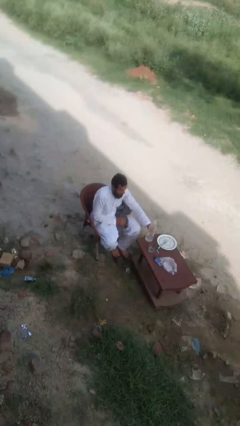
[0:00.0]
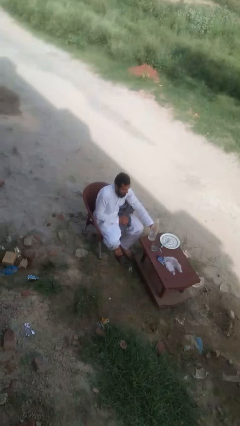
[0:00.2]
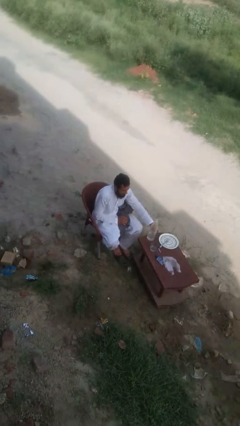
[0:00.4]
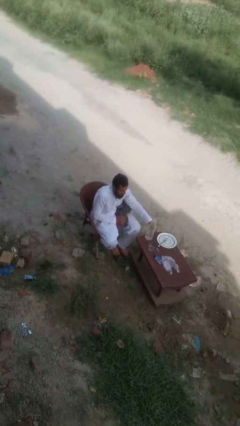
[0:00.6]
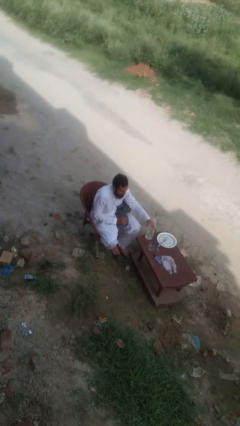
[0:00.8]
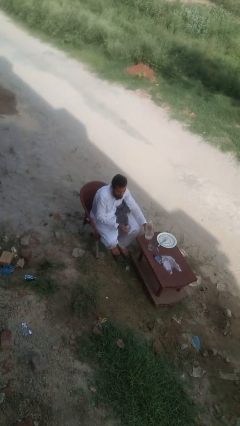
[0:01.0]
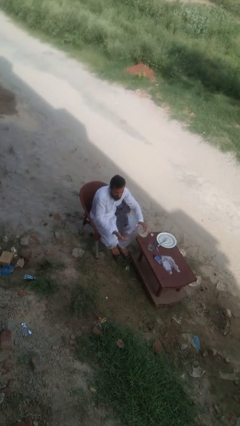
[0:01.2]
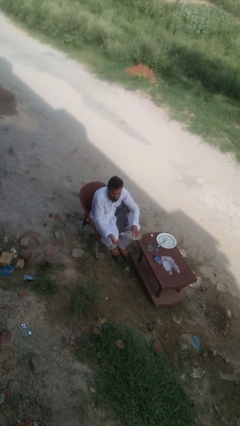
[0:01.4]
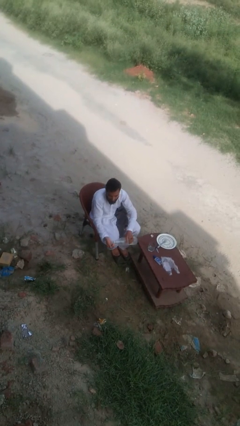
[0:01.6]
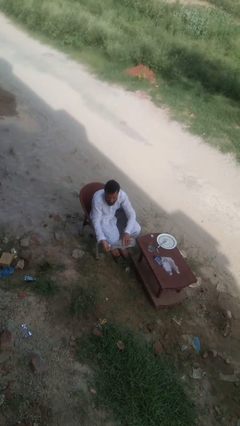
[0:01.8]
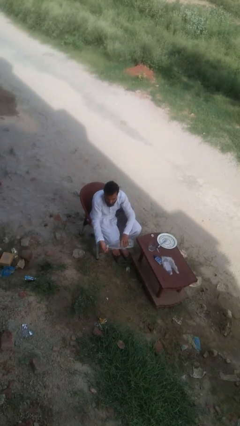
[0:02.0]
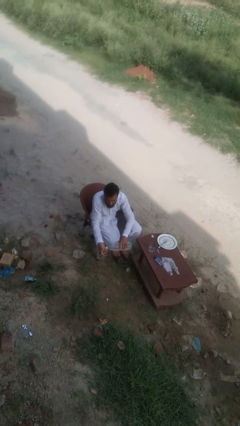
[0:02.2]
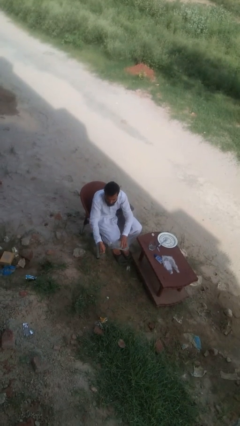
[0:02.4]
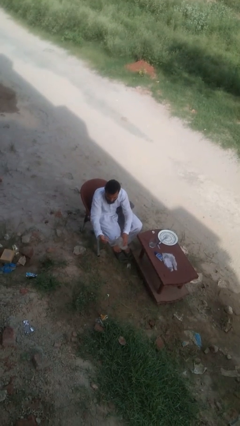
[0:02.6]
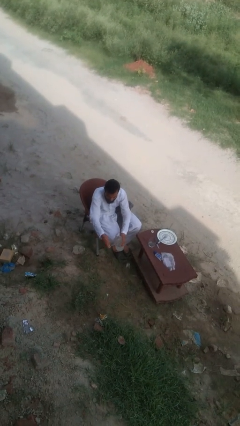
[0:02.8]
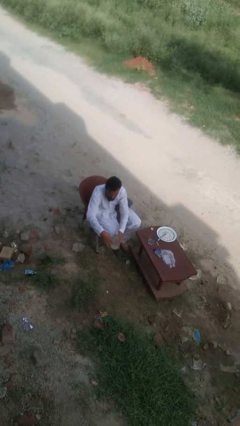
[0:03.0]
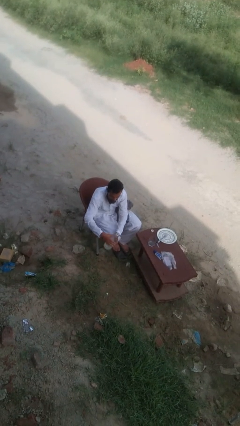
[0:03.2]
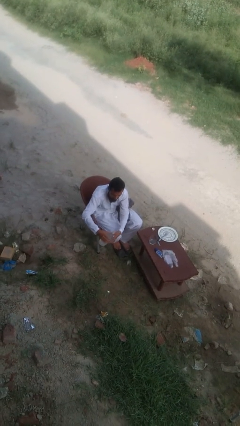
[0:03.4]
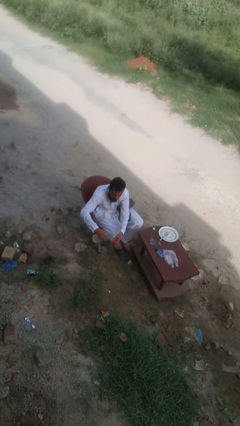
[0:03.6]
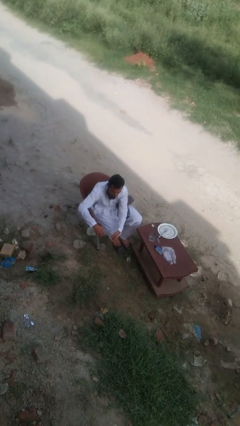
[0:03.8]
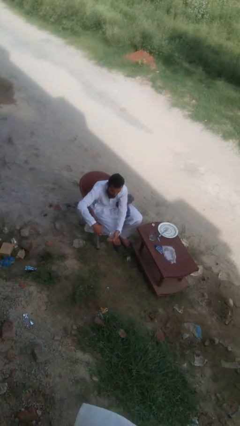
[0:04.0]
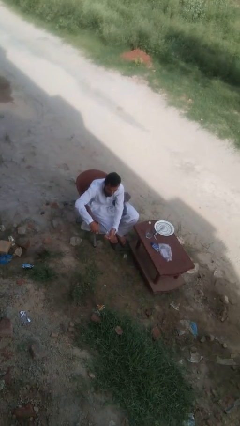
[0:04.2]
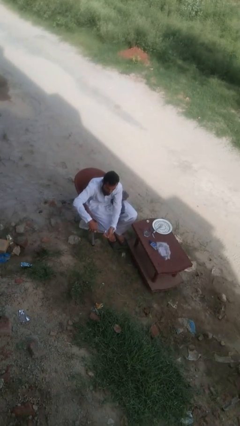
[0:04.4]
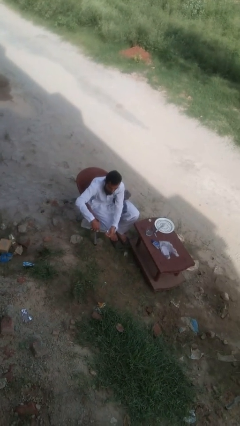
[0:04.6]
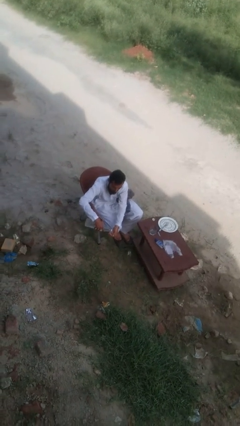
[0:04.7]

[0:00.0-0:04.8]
person washes hands

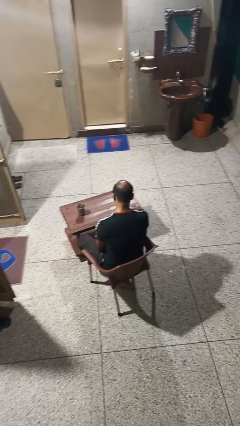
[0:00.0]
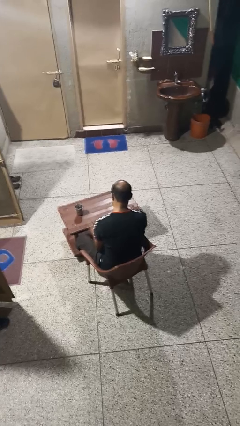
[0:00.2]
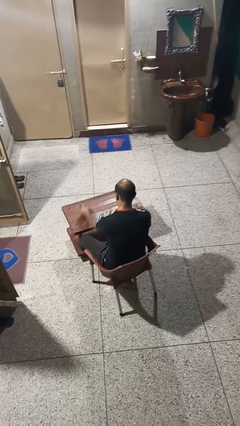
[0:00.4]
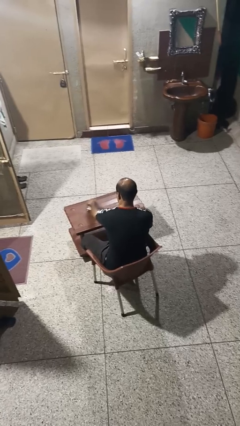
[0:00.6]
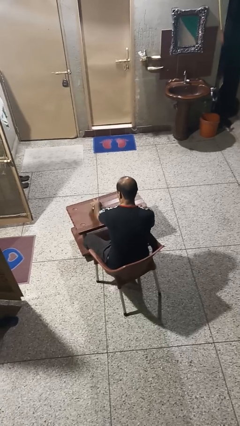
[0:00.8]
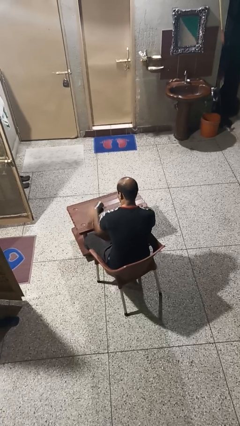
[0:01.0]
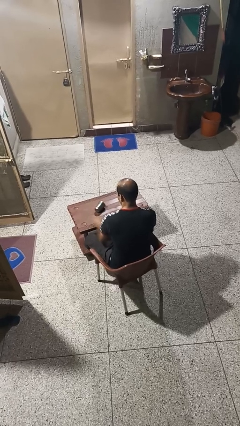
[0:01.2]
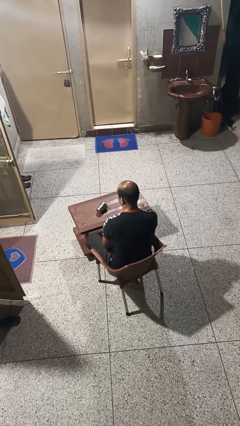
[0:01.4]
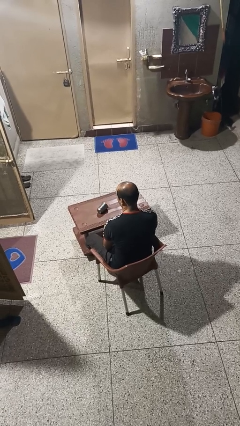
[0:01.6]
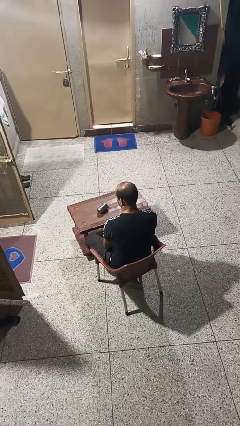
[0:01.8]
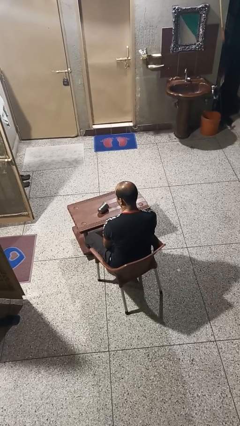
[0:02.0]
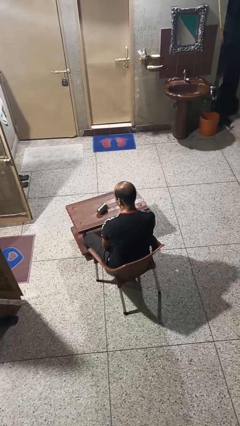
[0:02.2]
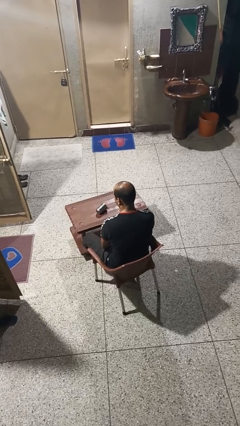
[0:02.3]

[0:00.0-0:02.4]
person knocks over glass

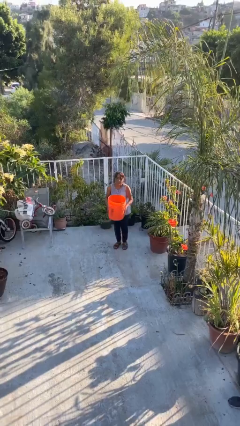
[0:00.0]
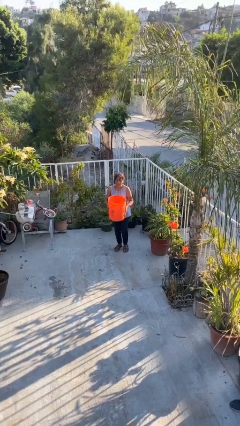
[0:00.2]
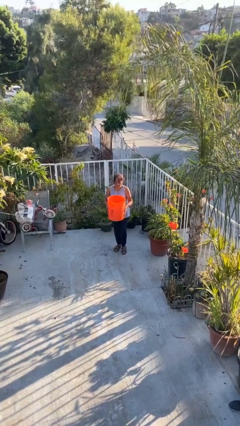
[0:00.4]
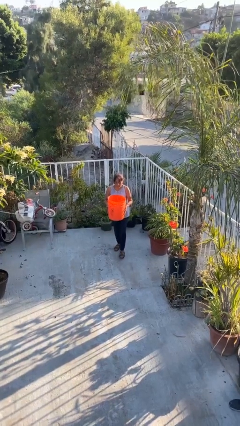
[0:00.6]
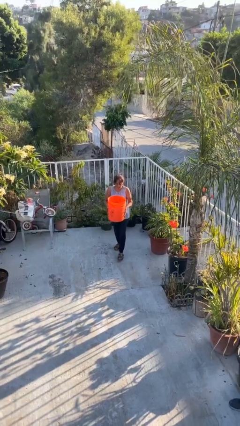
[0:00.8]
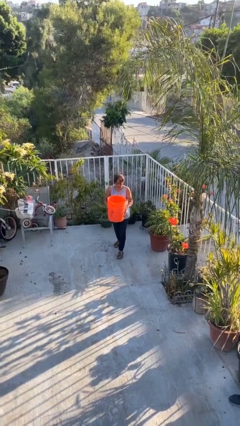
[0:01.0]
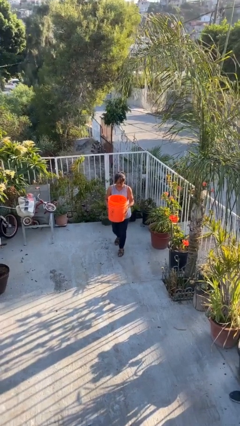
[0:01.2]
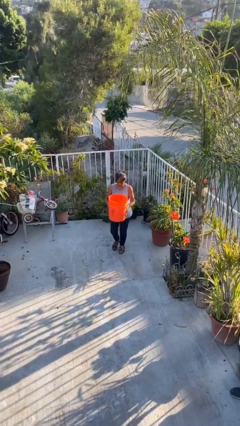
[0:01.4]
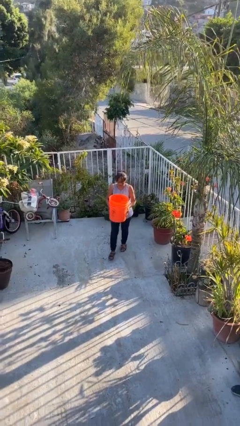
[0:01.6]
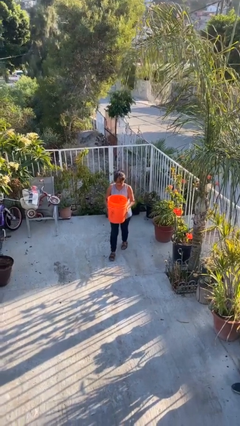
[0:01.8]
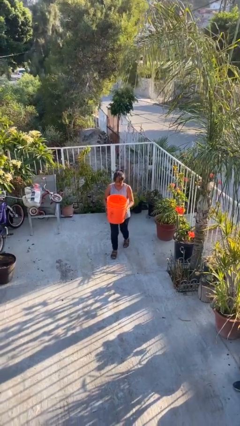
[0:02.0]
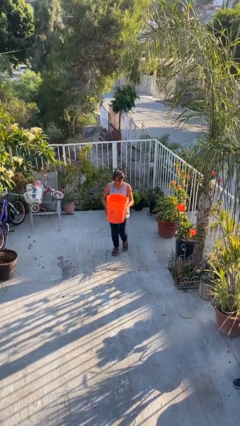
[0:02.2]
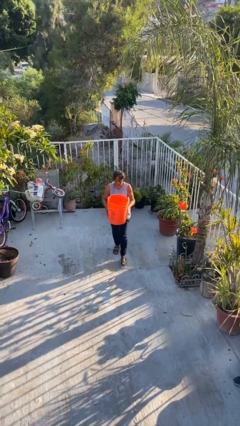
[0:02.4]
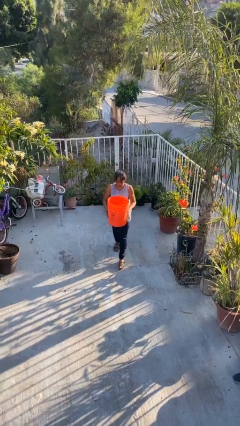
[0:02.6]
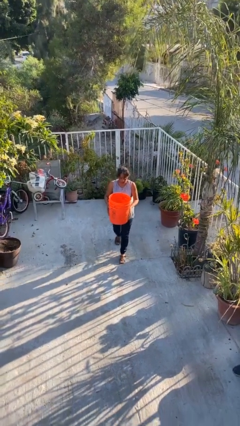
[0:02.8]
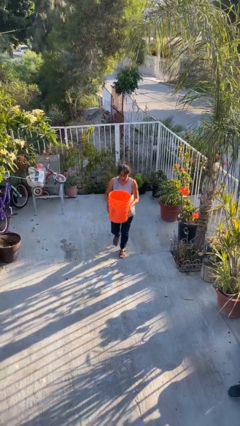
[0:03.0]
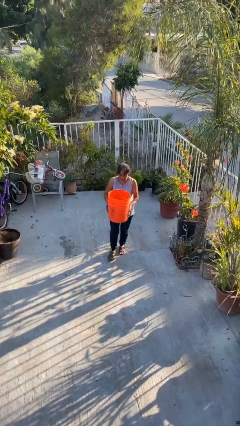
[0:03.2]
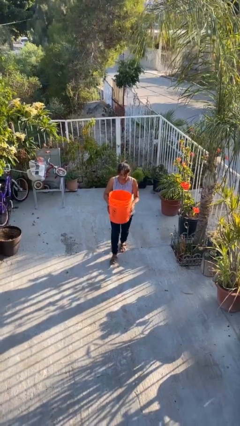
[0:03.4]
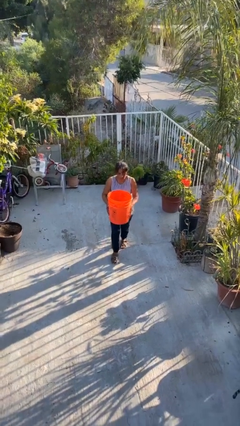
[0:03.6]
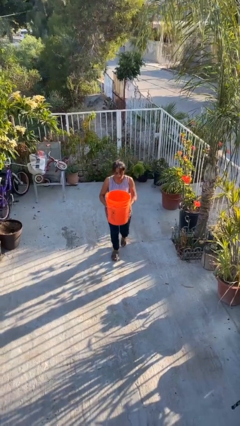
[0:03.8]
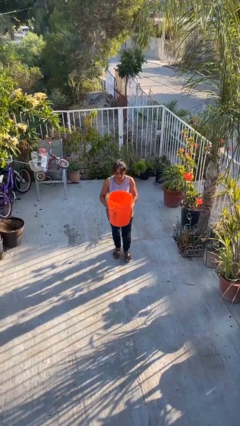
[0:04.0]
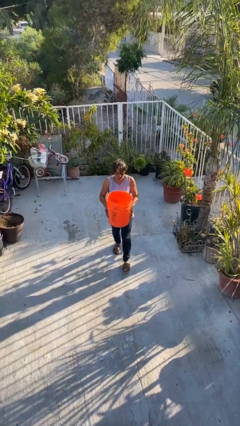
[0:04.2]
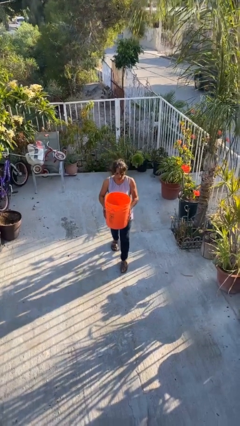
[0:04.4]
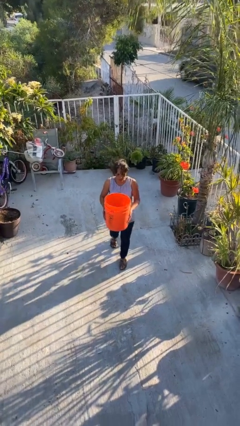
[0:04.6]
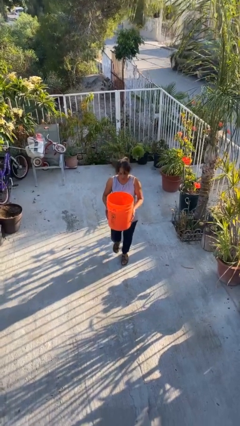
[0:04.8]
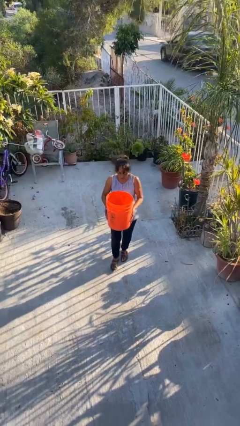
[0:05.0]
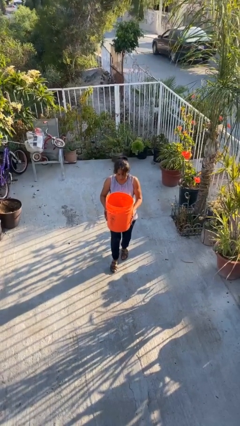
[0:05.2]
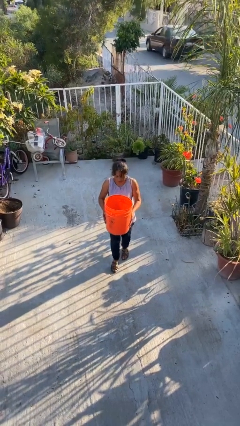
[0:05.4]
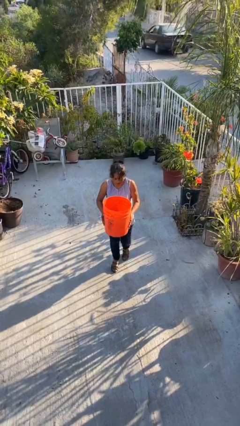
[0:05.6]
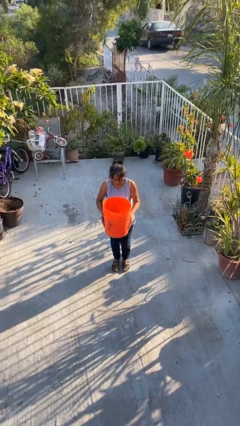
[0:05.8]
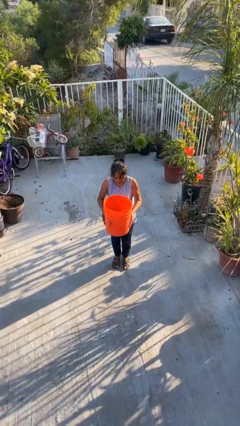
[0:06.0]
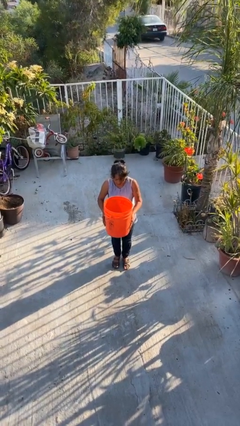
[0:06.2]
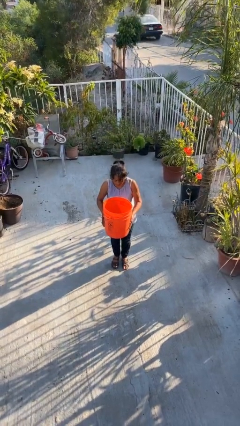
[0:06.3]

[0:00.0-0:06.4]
person carries heavy object

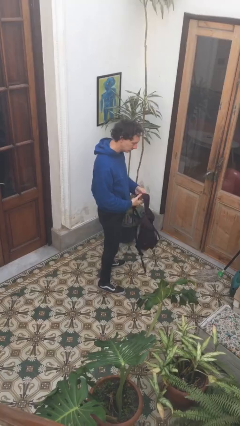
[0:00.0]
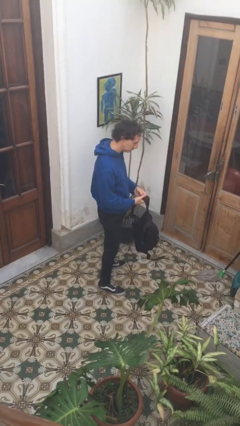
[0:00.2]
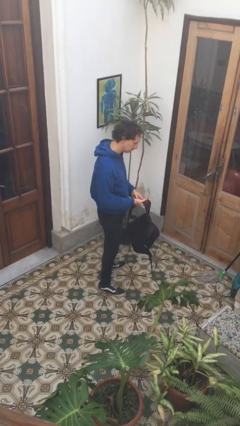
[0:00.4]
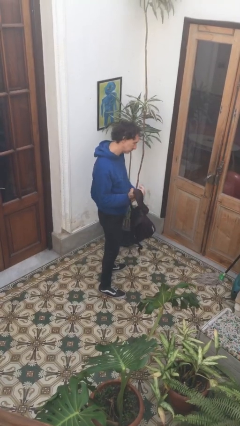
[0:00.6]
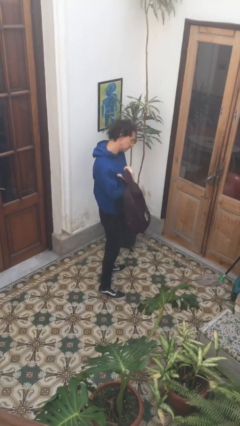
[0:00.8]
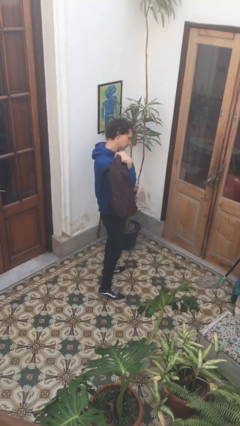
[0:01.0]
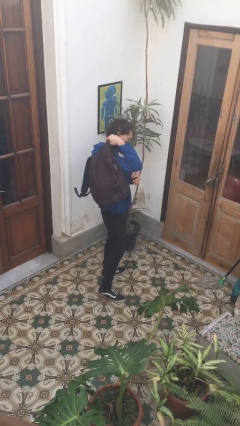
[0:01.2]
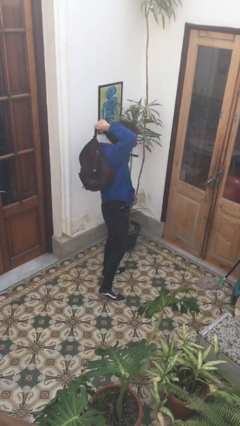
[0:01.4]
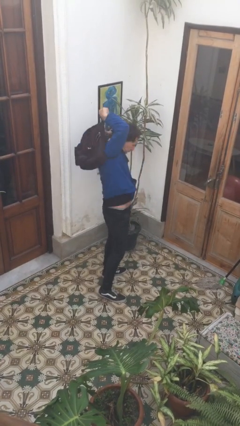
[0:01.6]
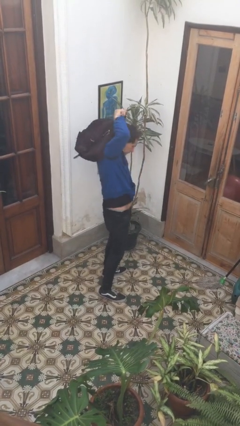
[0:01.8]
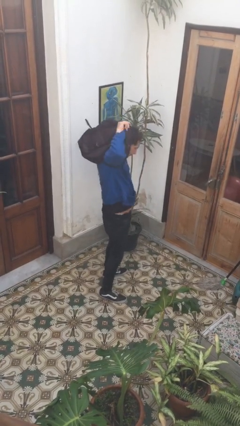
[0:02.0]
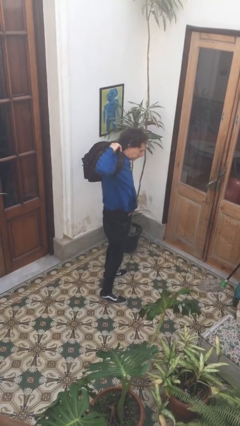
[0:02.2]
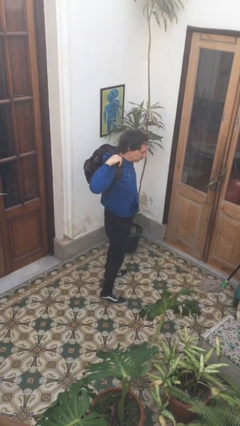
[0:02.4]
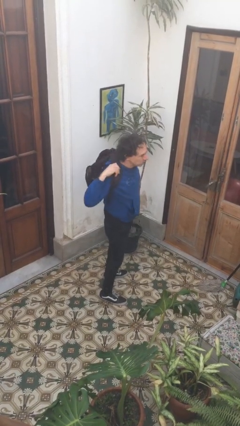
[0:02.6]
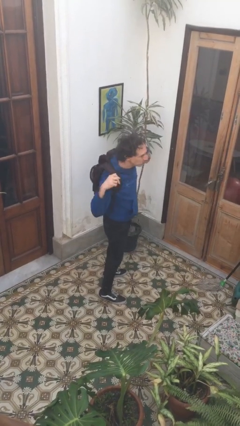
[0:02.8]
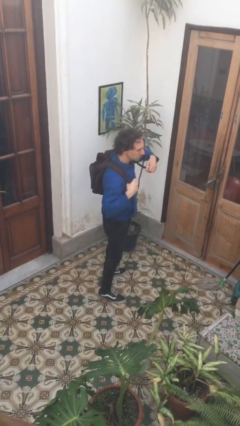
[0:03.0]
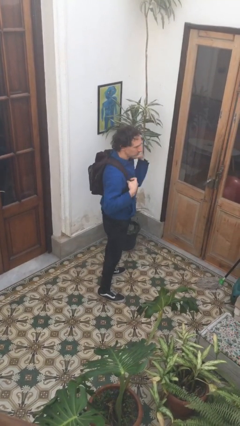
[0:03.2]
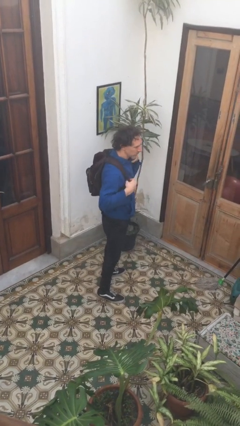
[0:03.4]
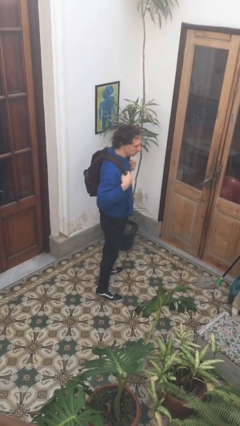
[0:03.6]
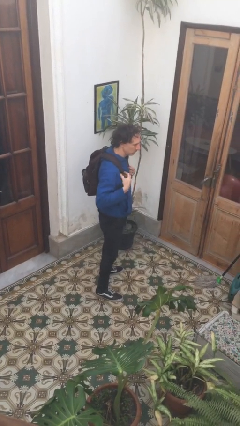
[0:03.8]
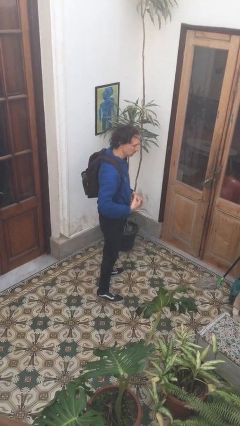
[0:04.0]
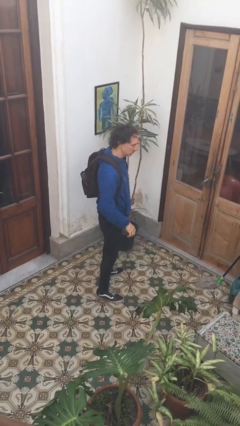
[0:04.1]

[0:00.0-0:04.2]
person puts on backpack
